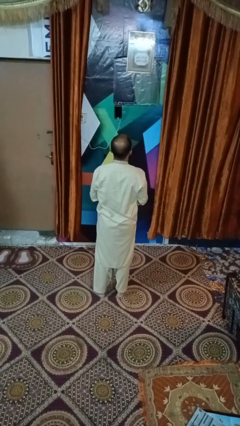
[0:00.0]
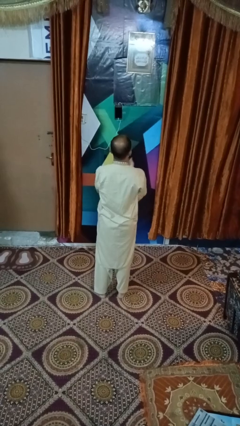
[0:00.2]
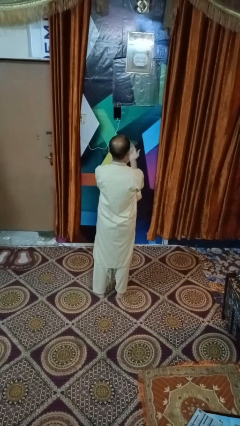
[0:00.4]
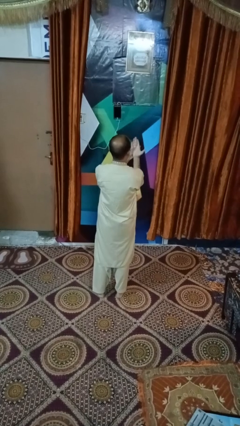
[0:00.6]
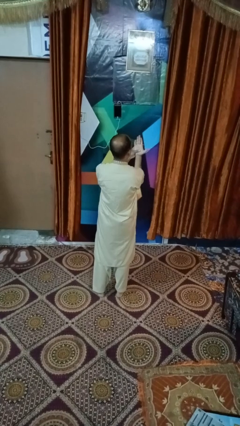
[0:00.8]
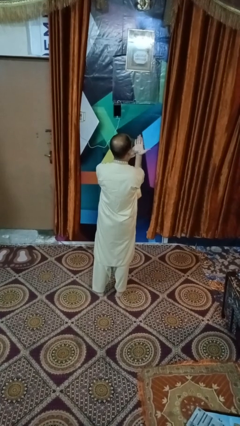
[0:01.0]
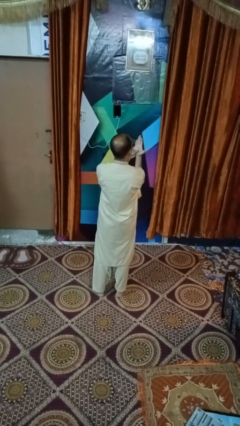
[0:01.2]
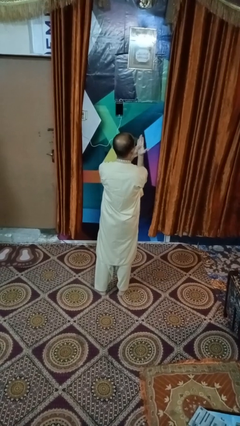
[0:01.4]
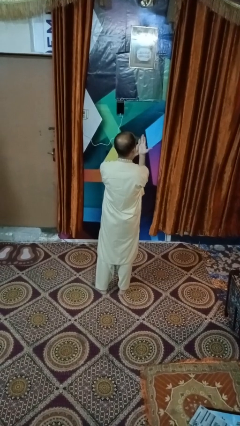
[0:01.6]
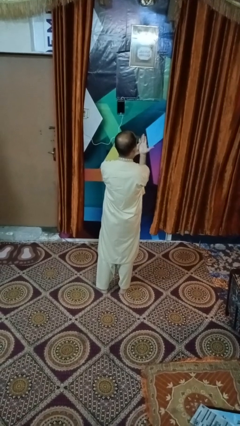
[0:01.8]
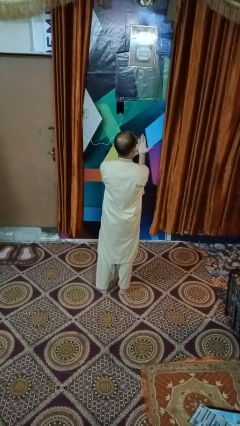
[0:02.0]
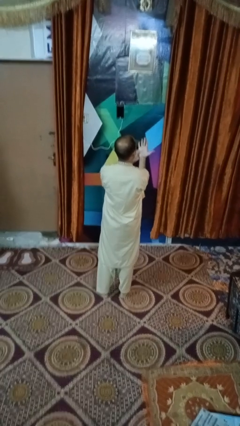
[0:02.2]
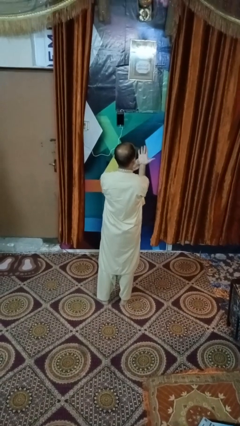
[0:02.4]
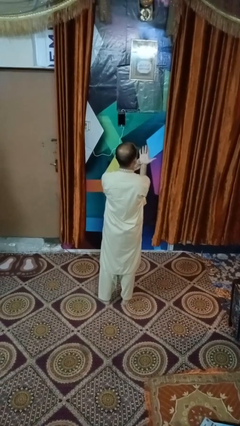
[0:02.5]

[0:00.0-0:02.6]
person looks at hands in lap

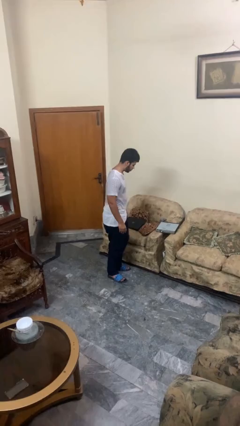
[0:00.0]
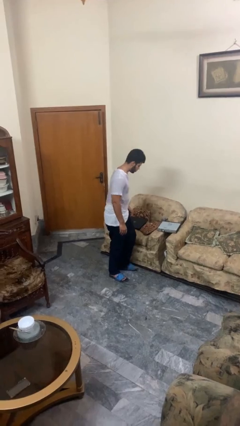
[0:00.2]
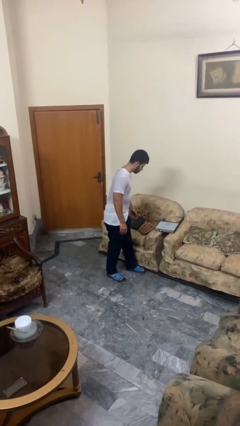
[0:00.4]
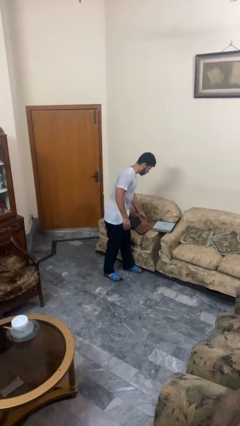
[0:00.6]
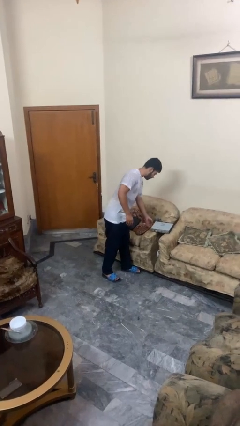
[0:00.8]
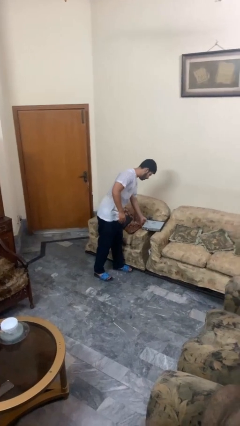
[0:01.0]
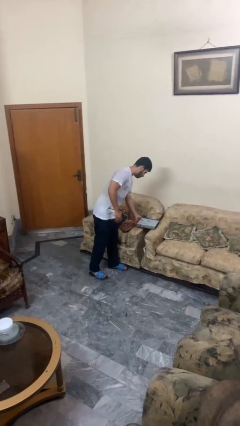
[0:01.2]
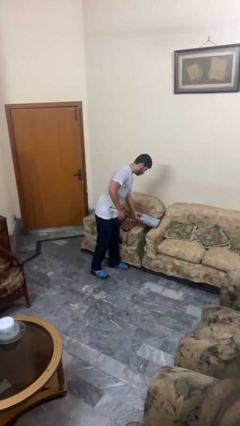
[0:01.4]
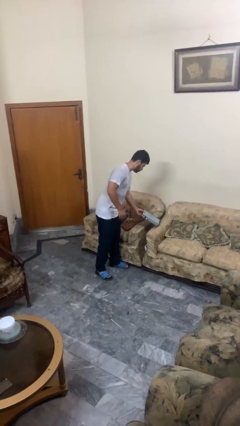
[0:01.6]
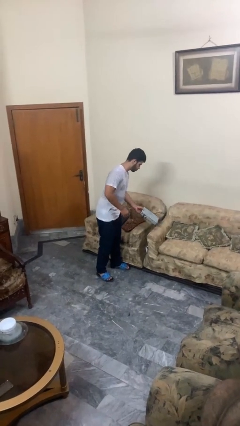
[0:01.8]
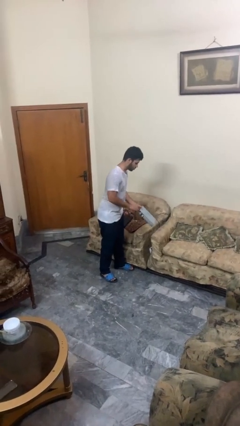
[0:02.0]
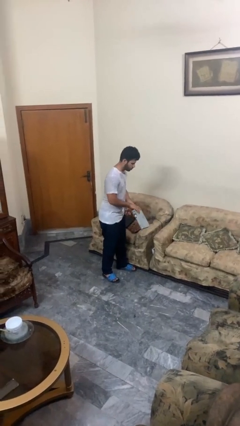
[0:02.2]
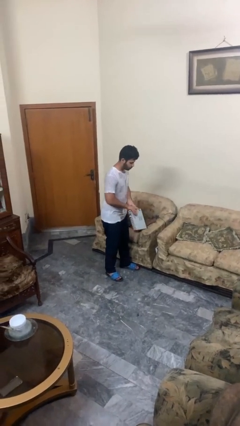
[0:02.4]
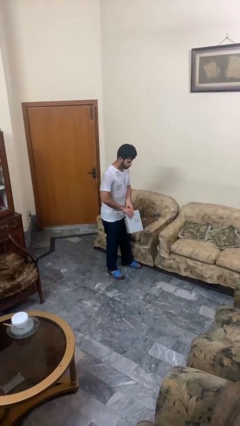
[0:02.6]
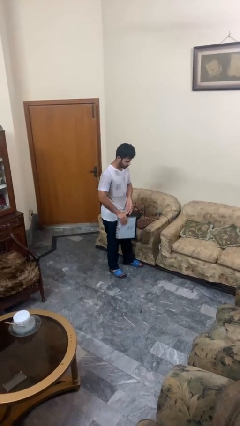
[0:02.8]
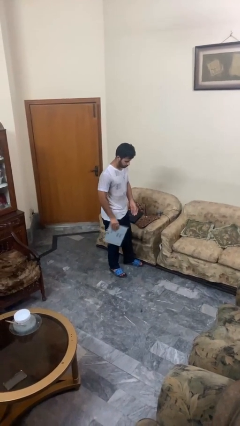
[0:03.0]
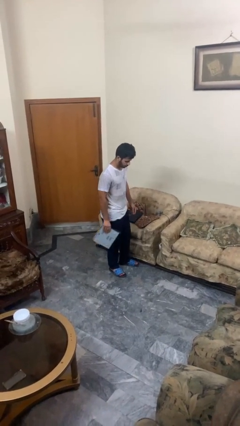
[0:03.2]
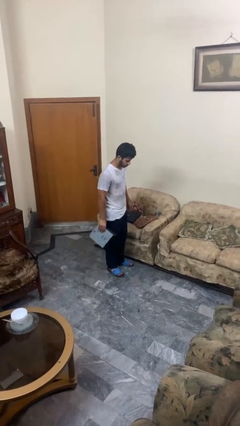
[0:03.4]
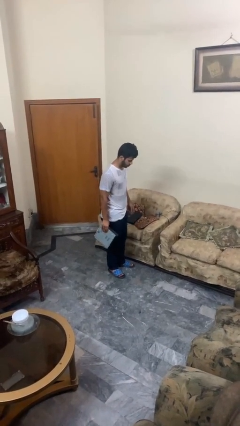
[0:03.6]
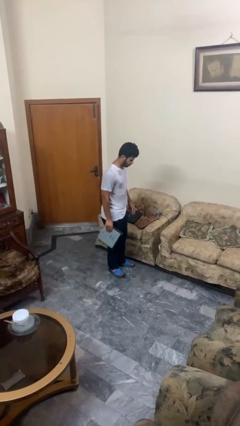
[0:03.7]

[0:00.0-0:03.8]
person picks up object from couch

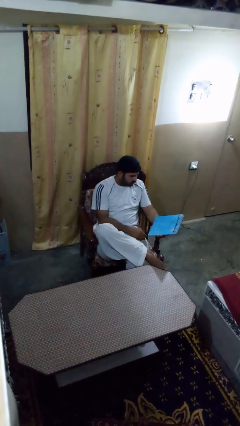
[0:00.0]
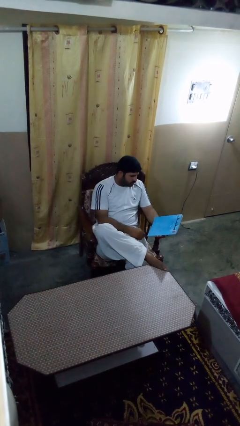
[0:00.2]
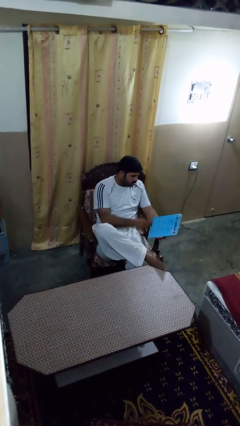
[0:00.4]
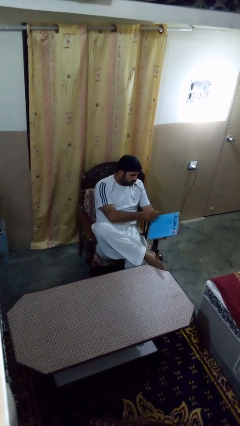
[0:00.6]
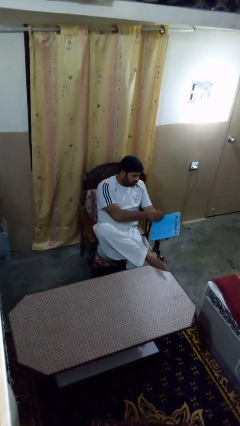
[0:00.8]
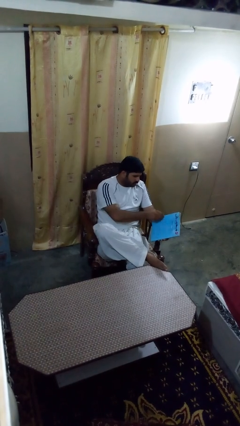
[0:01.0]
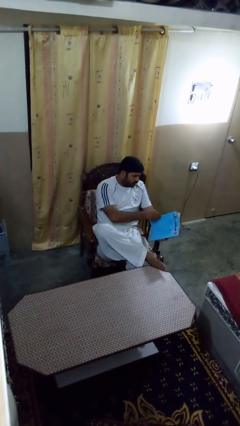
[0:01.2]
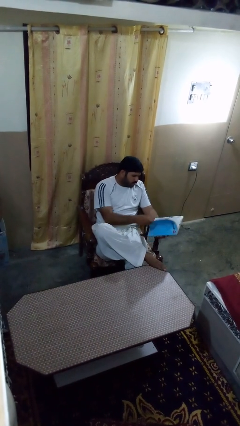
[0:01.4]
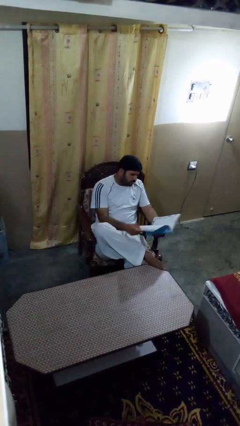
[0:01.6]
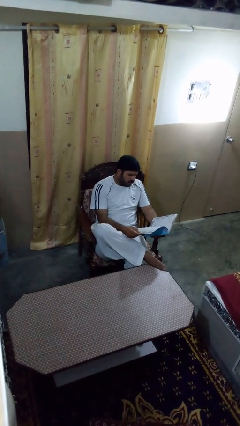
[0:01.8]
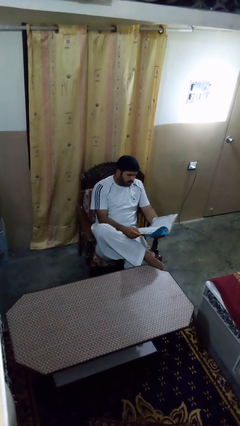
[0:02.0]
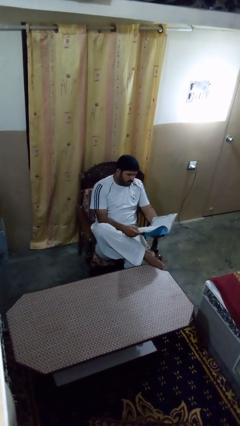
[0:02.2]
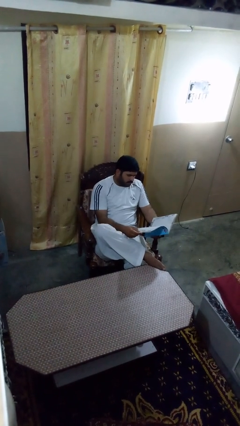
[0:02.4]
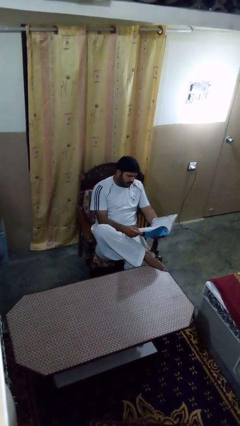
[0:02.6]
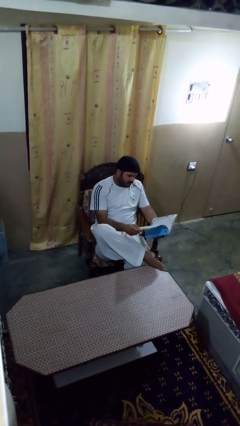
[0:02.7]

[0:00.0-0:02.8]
person reads magazine

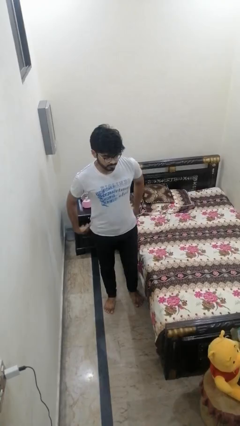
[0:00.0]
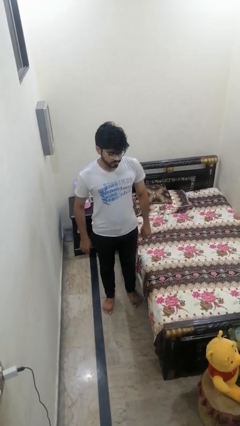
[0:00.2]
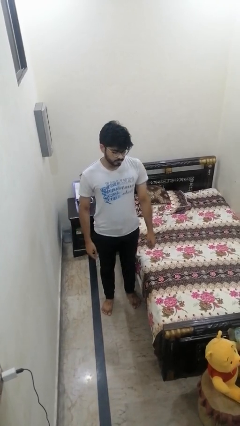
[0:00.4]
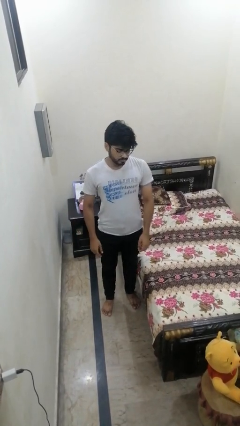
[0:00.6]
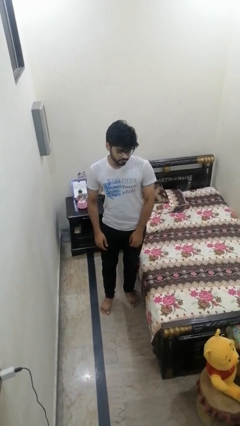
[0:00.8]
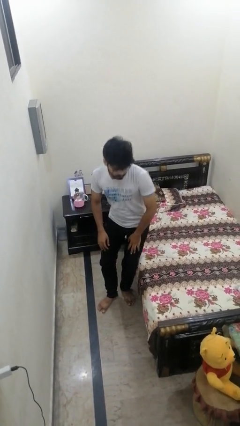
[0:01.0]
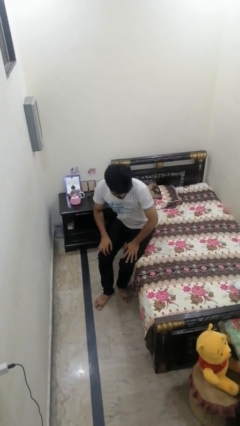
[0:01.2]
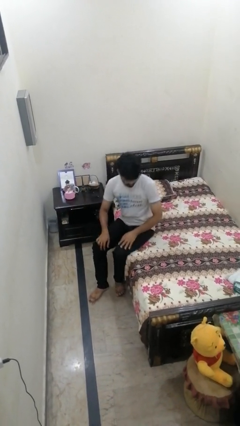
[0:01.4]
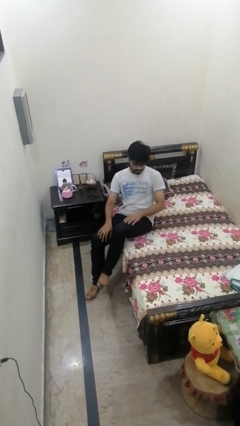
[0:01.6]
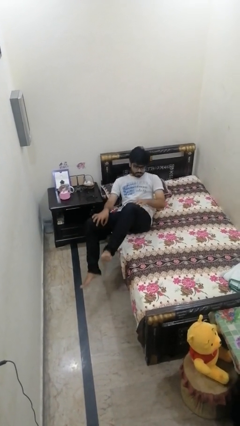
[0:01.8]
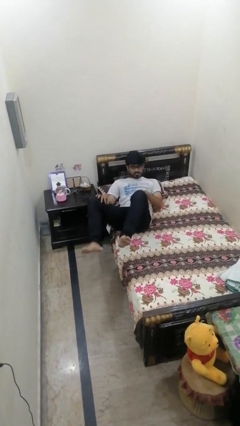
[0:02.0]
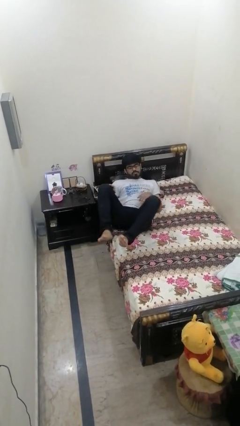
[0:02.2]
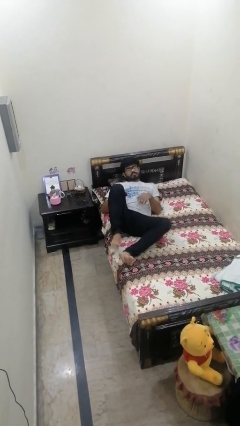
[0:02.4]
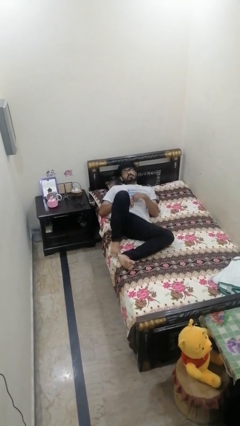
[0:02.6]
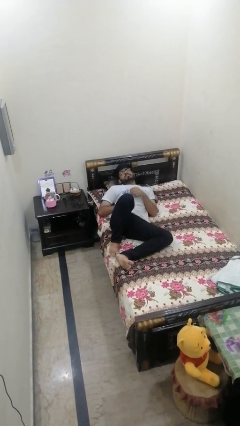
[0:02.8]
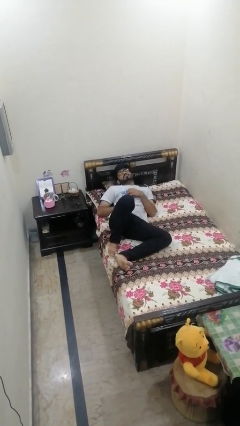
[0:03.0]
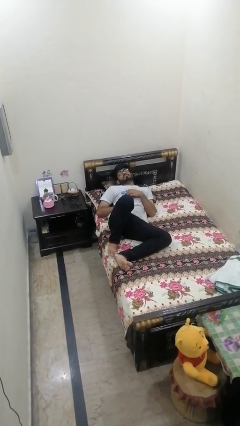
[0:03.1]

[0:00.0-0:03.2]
person lies down on bed

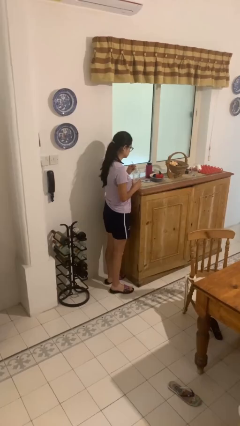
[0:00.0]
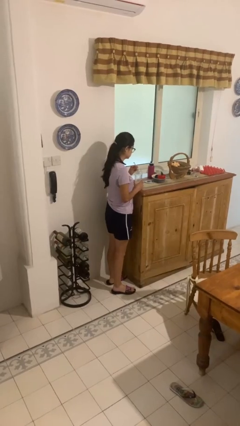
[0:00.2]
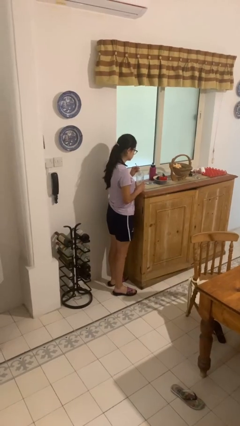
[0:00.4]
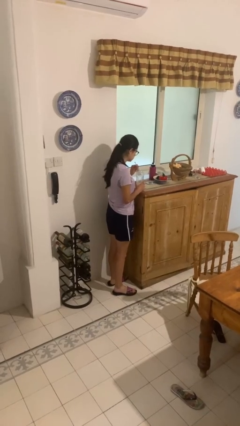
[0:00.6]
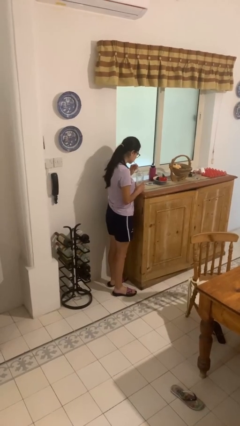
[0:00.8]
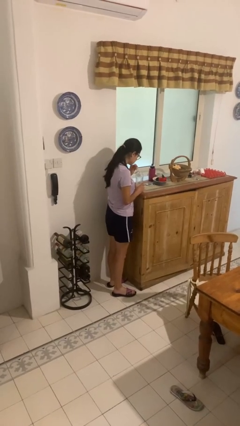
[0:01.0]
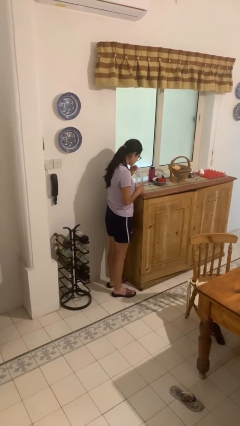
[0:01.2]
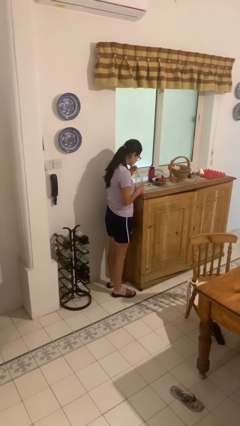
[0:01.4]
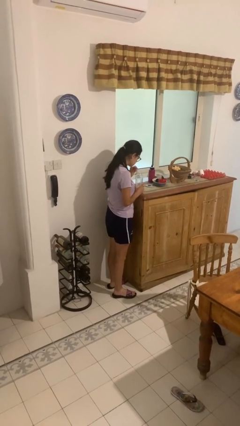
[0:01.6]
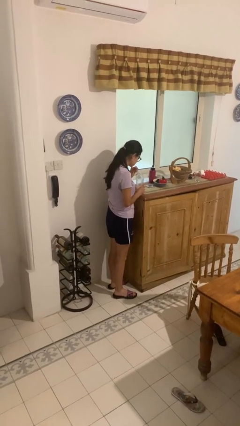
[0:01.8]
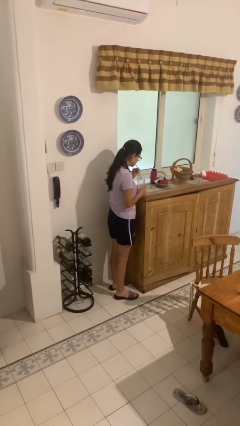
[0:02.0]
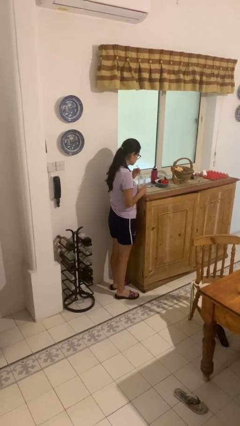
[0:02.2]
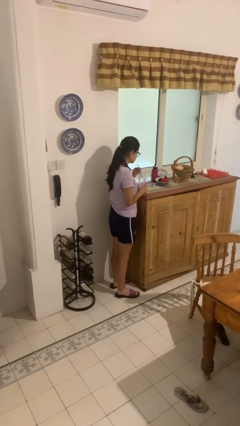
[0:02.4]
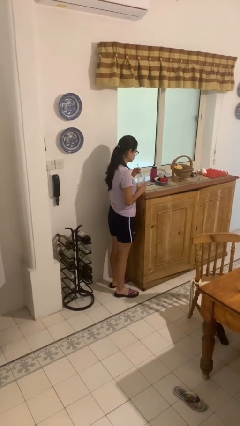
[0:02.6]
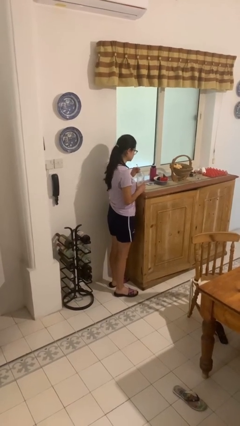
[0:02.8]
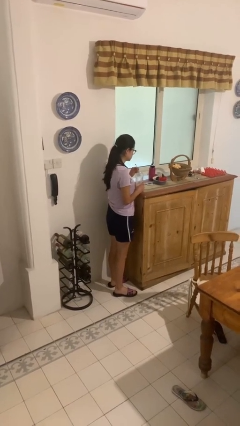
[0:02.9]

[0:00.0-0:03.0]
person drinks from straw

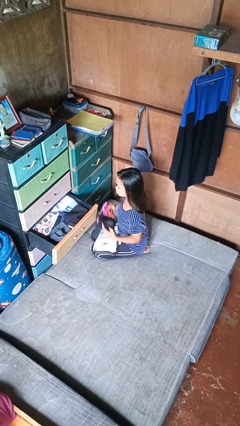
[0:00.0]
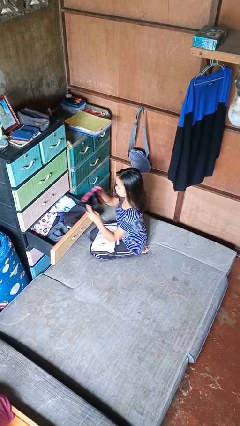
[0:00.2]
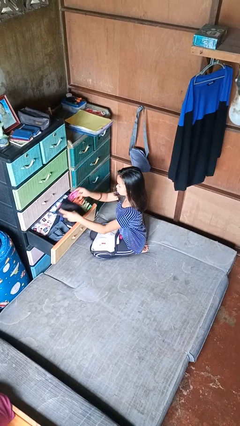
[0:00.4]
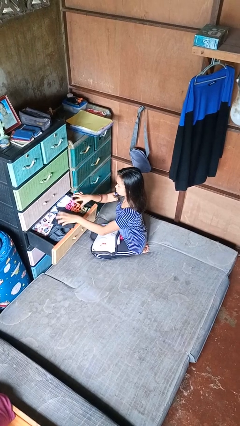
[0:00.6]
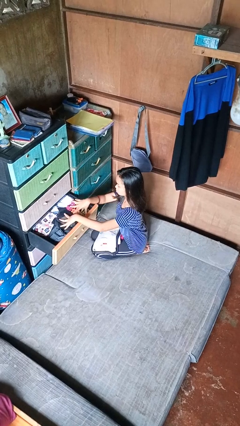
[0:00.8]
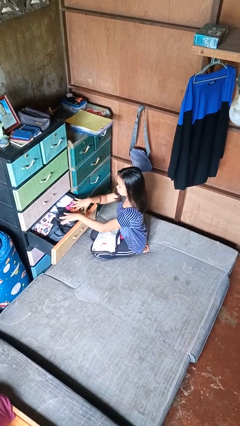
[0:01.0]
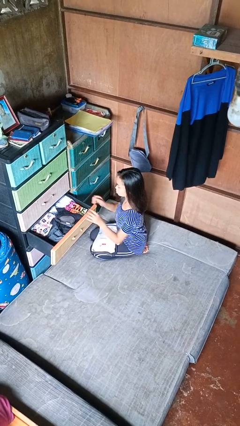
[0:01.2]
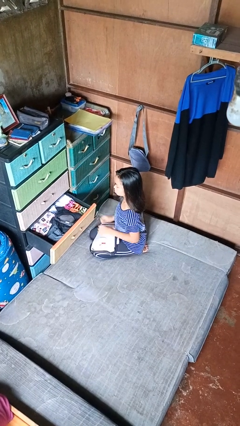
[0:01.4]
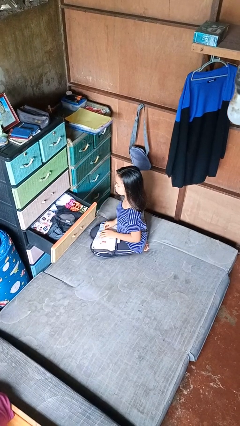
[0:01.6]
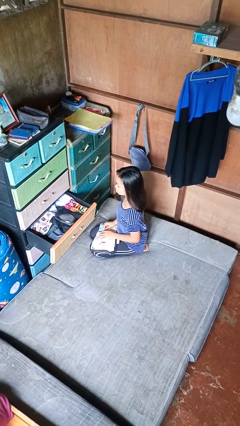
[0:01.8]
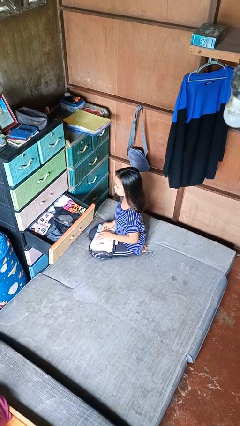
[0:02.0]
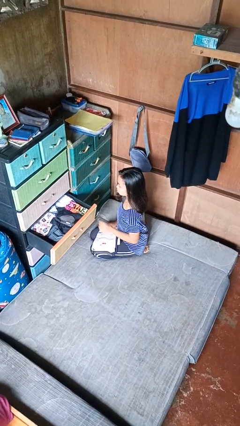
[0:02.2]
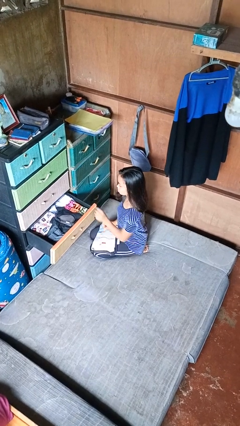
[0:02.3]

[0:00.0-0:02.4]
person puts clothes into dresser
